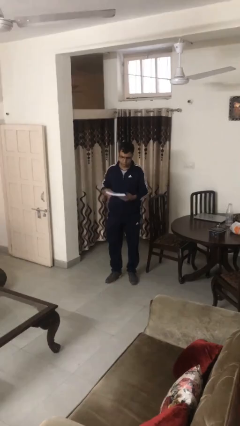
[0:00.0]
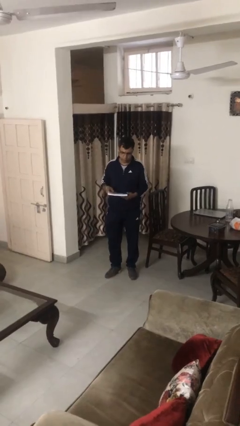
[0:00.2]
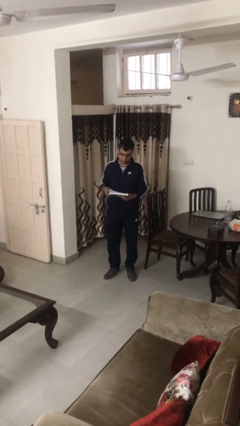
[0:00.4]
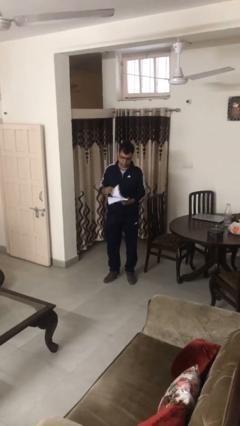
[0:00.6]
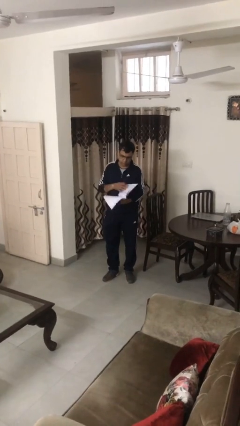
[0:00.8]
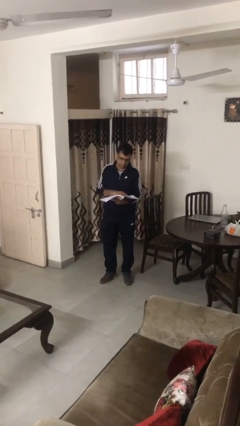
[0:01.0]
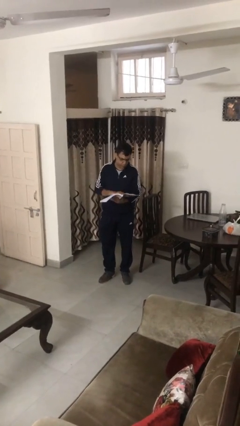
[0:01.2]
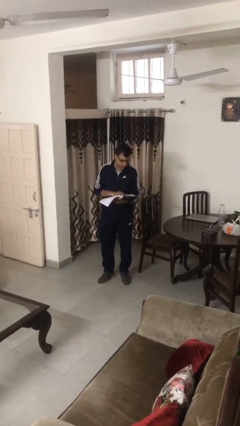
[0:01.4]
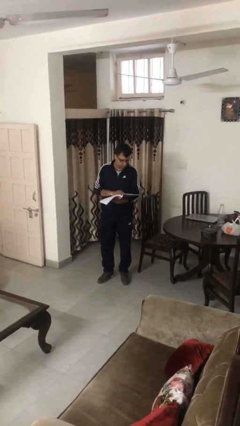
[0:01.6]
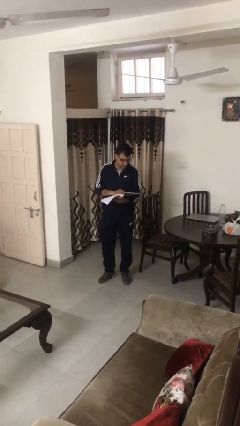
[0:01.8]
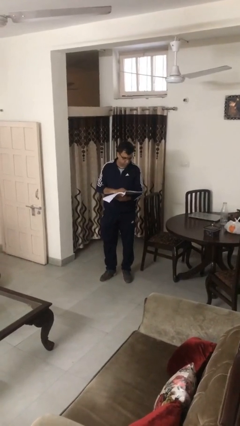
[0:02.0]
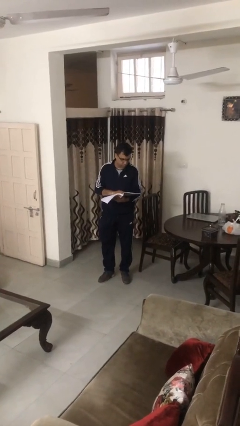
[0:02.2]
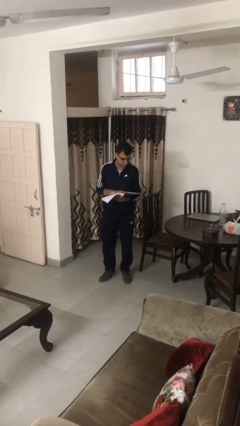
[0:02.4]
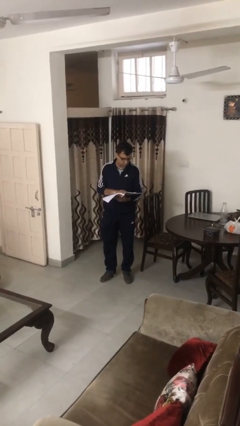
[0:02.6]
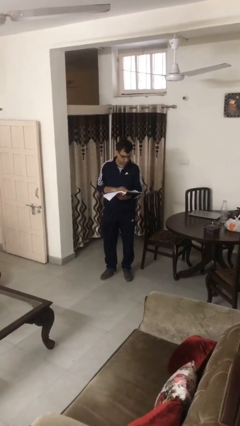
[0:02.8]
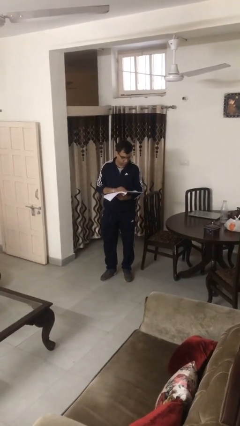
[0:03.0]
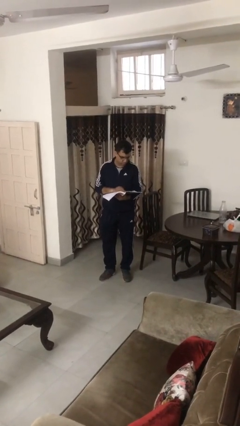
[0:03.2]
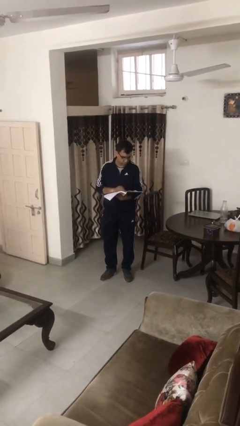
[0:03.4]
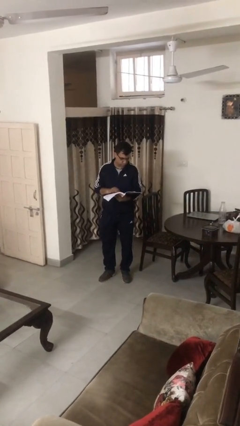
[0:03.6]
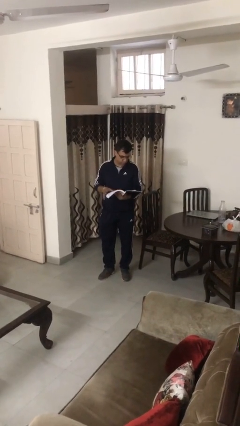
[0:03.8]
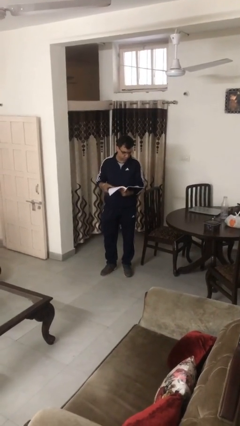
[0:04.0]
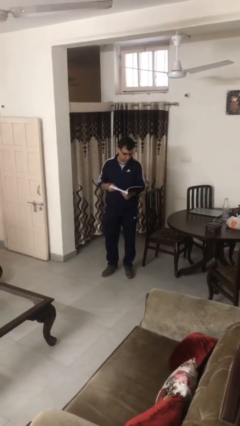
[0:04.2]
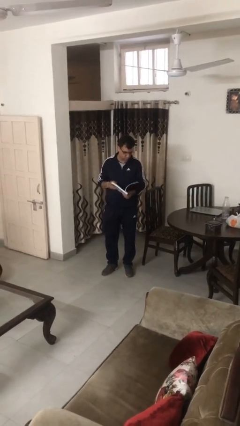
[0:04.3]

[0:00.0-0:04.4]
person reads document

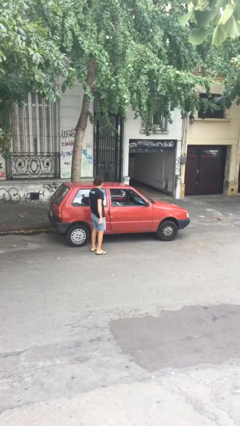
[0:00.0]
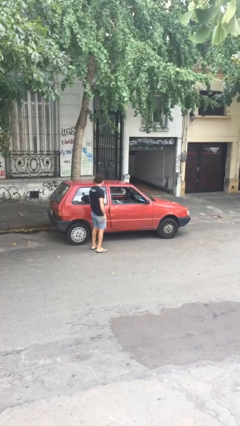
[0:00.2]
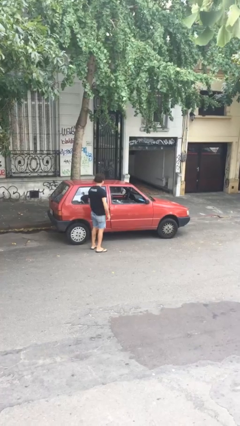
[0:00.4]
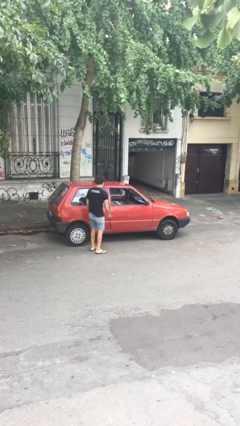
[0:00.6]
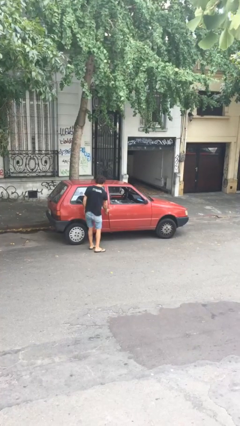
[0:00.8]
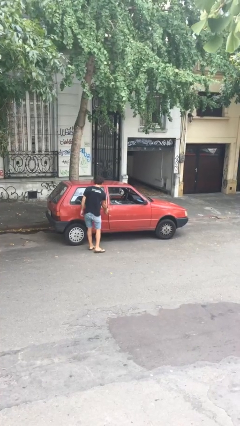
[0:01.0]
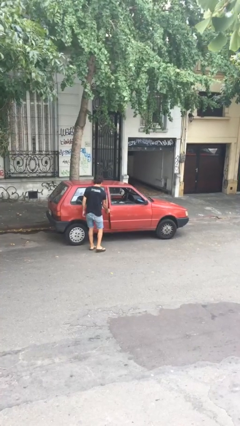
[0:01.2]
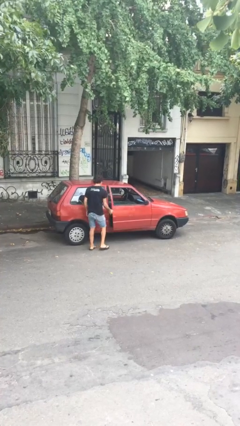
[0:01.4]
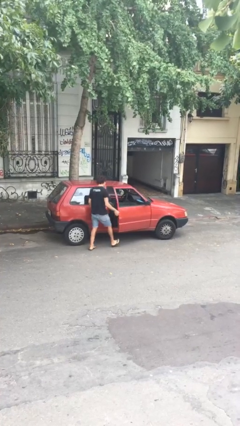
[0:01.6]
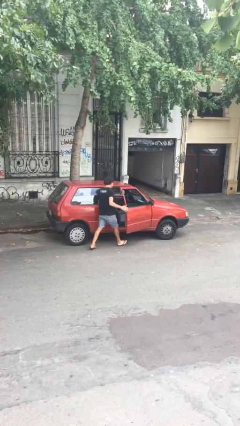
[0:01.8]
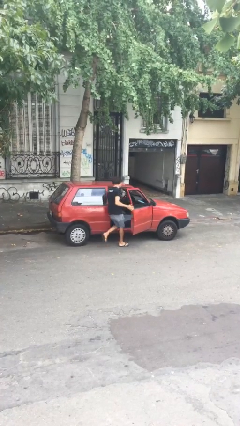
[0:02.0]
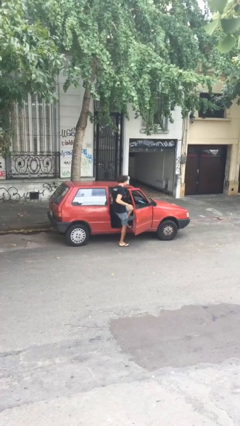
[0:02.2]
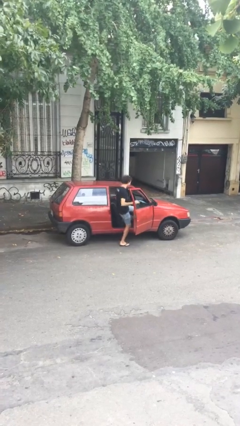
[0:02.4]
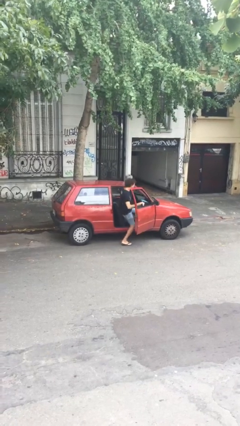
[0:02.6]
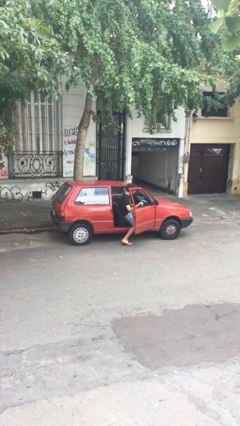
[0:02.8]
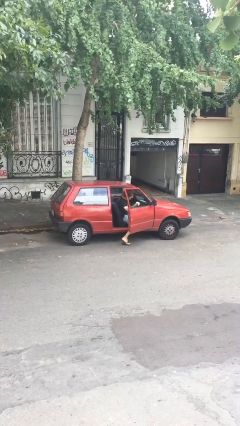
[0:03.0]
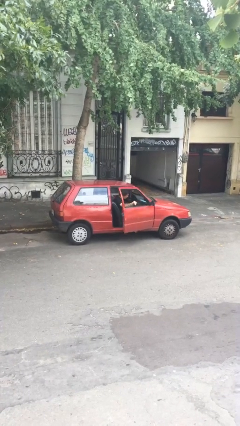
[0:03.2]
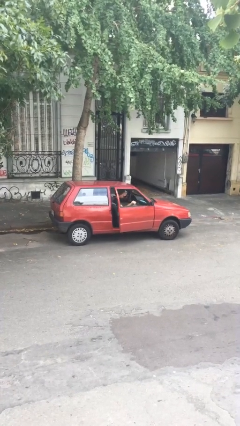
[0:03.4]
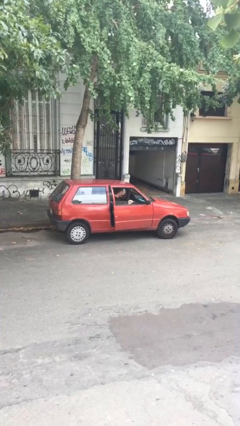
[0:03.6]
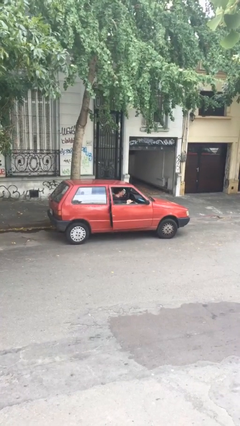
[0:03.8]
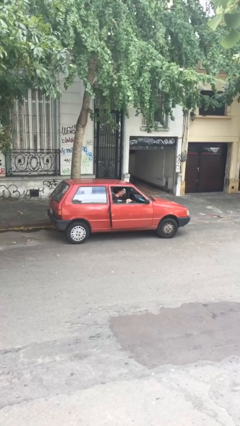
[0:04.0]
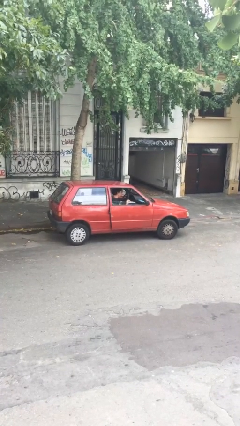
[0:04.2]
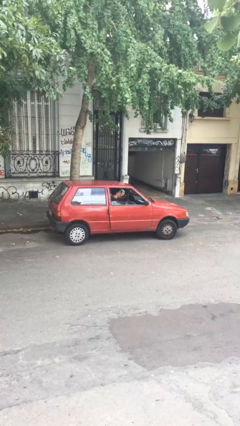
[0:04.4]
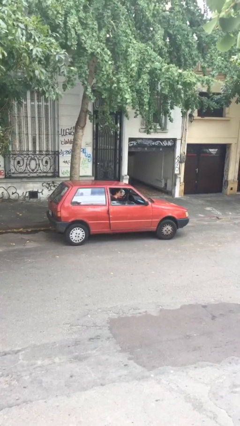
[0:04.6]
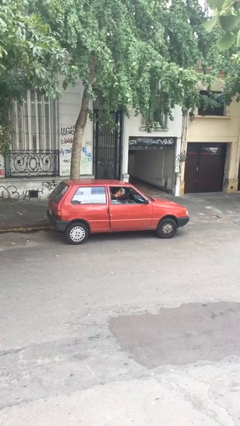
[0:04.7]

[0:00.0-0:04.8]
car picks up person

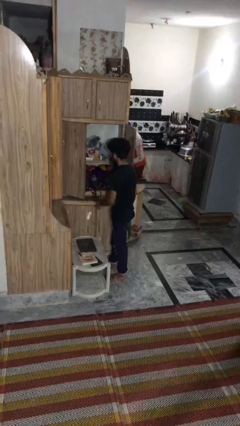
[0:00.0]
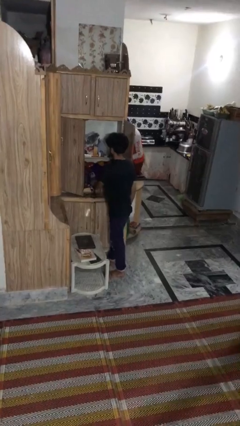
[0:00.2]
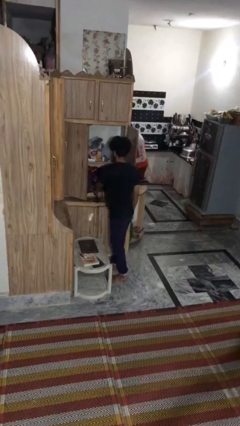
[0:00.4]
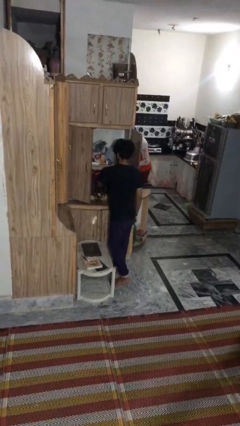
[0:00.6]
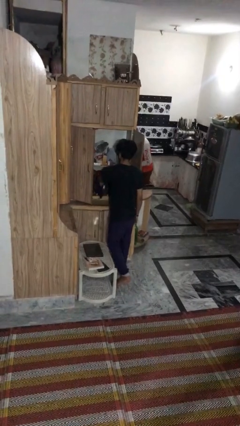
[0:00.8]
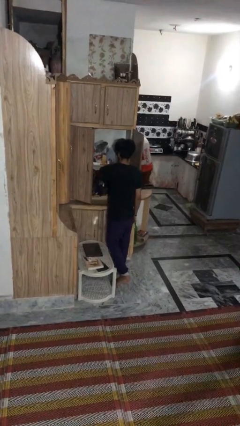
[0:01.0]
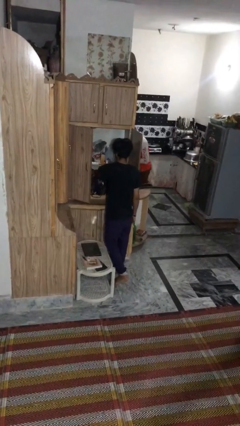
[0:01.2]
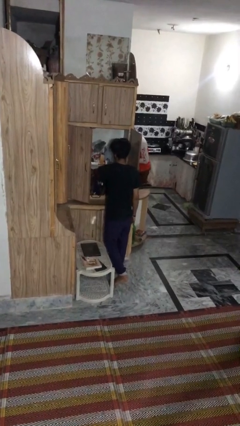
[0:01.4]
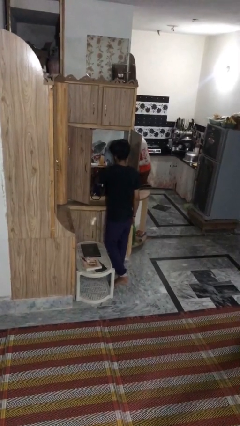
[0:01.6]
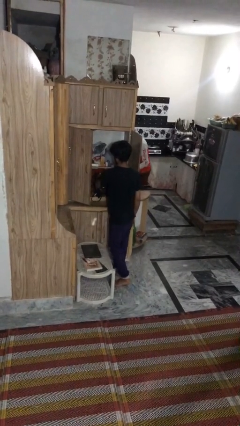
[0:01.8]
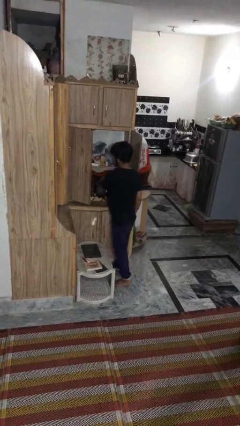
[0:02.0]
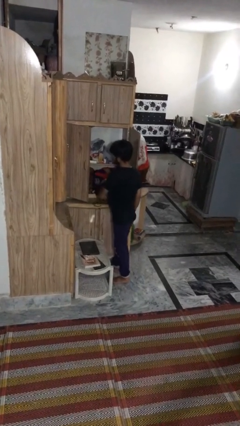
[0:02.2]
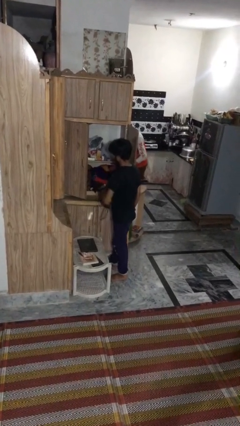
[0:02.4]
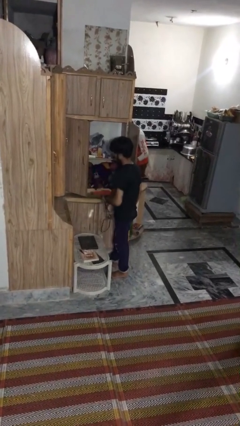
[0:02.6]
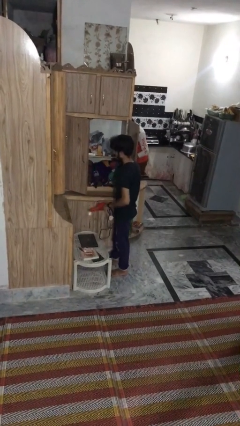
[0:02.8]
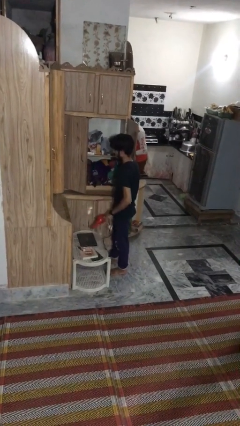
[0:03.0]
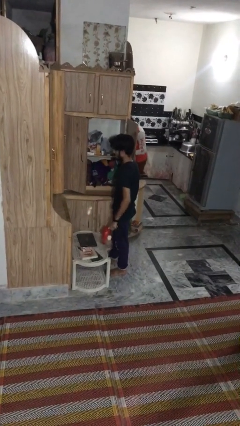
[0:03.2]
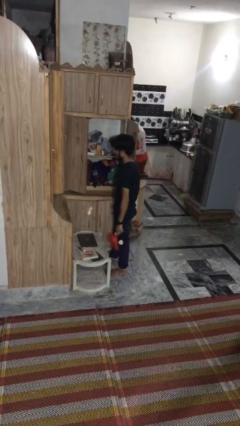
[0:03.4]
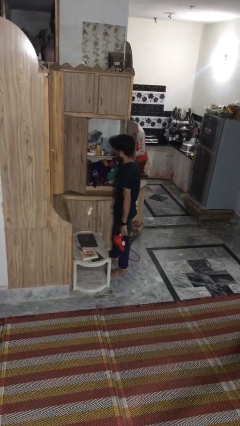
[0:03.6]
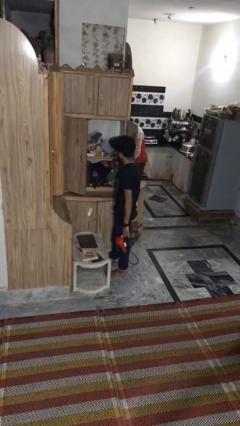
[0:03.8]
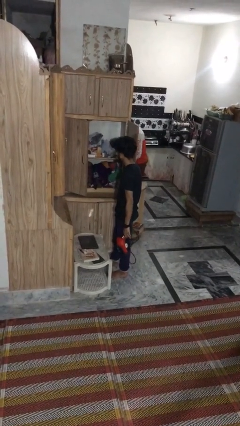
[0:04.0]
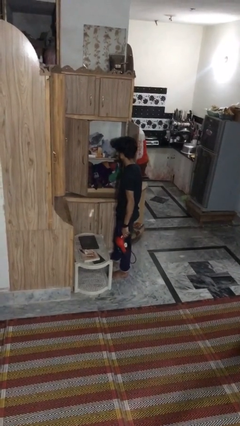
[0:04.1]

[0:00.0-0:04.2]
person picks up object from cabinet

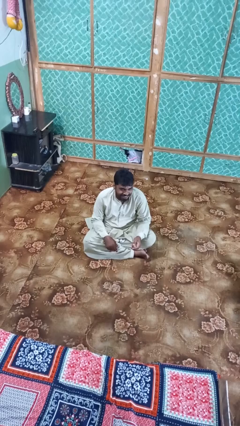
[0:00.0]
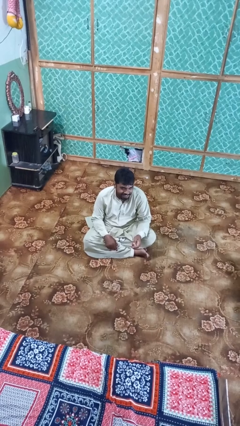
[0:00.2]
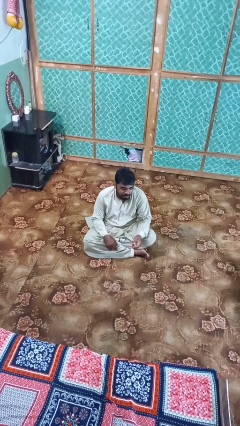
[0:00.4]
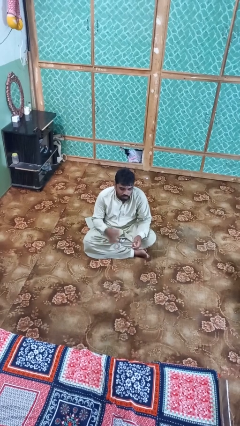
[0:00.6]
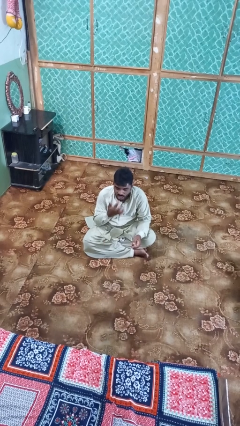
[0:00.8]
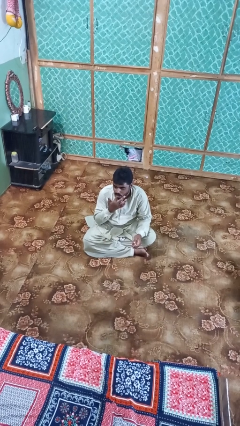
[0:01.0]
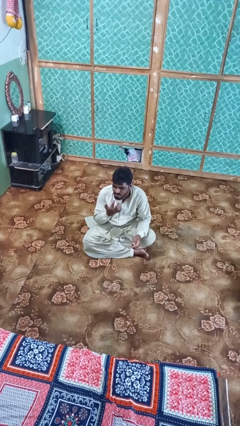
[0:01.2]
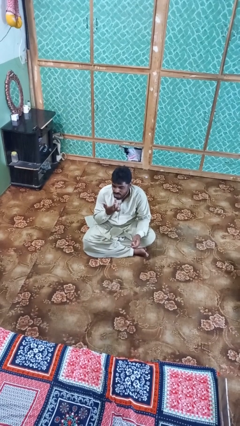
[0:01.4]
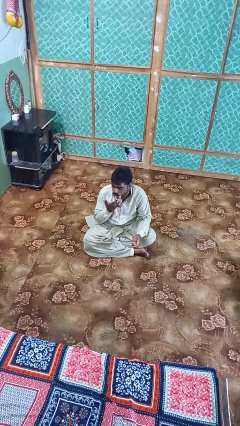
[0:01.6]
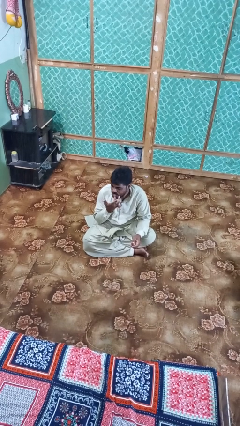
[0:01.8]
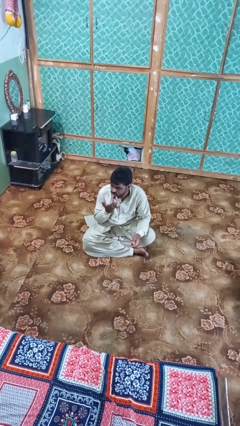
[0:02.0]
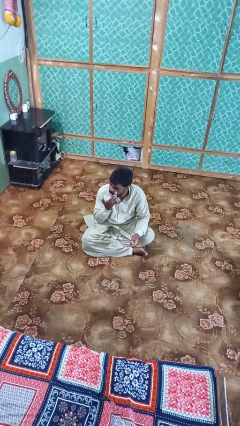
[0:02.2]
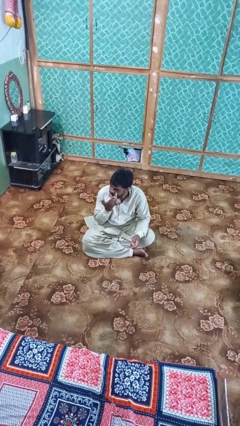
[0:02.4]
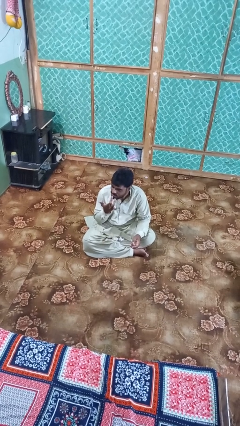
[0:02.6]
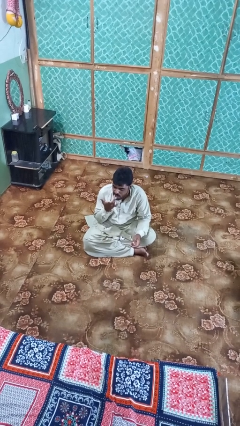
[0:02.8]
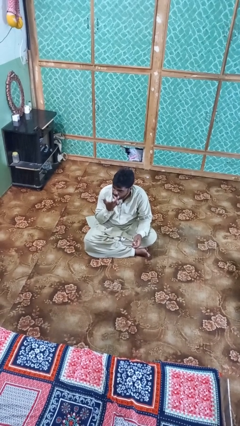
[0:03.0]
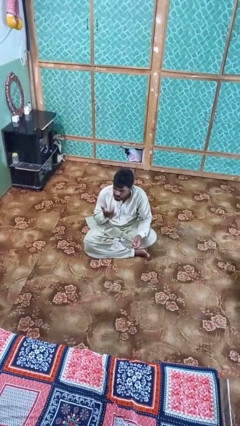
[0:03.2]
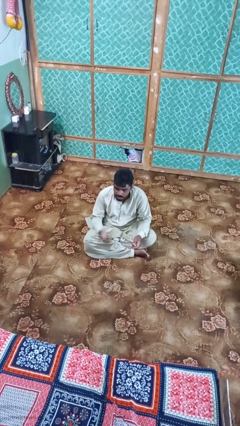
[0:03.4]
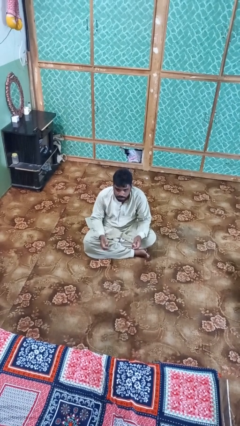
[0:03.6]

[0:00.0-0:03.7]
person licks fingers

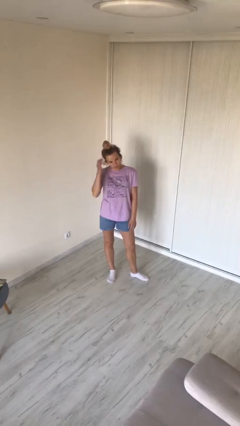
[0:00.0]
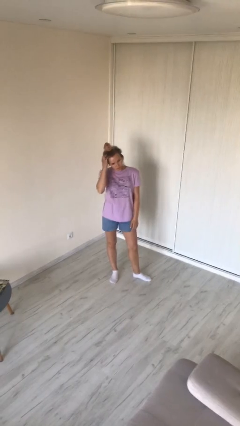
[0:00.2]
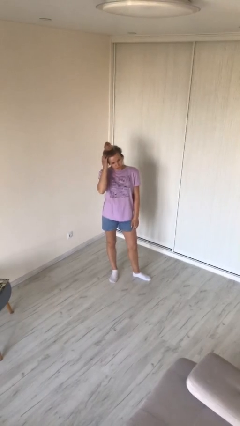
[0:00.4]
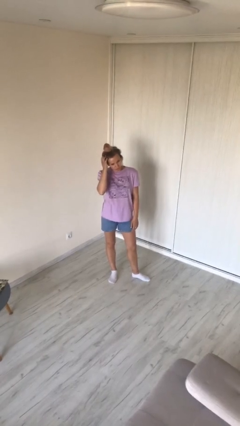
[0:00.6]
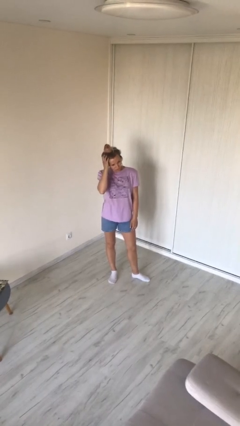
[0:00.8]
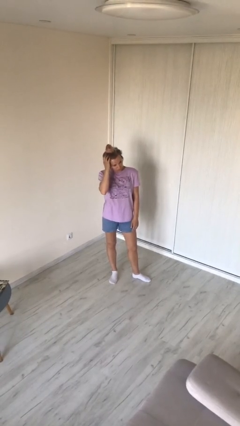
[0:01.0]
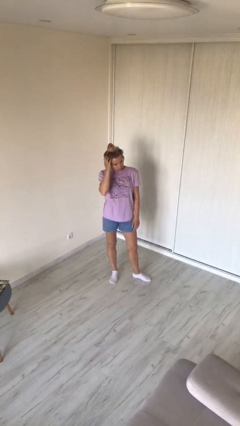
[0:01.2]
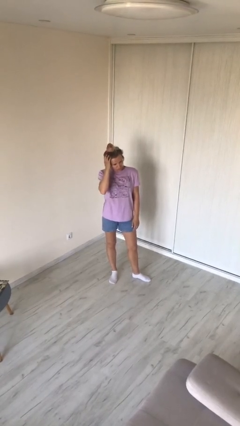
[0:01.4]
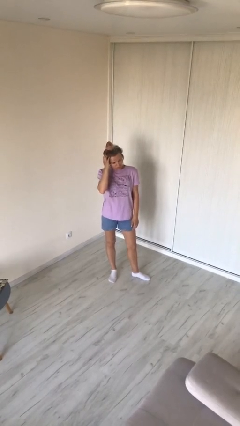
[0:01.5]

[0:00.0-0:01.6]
person scratches face
